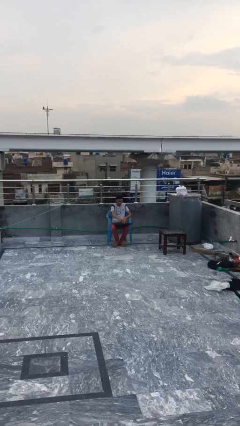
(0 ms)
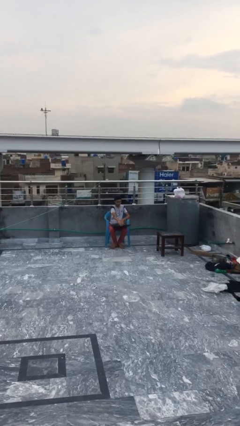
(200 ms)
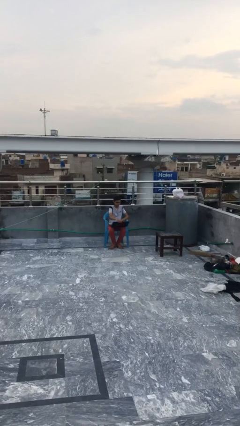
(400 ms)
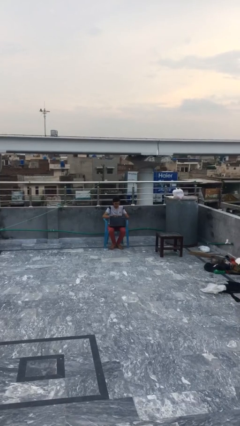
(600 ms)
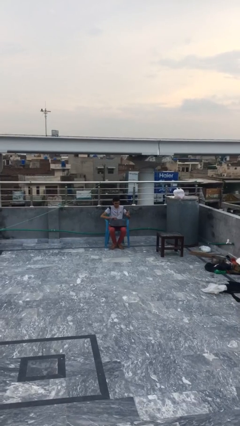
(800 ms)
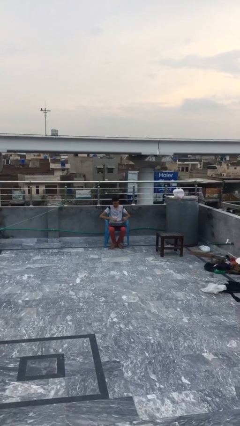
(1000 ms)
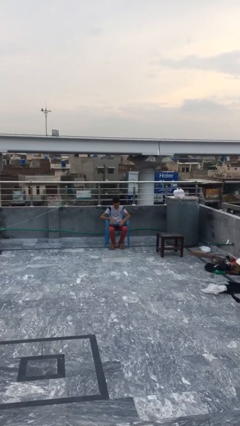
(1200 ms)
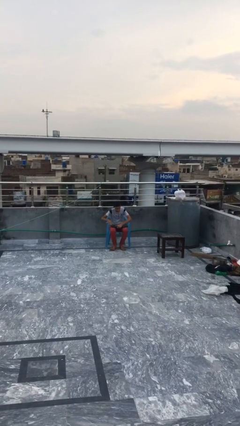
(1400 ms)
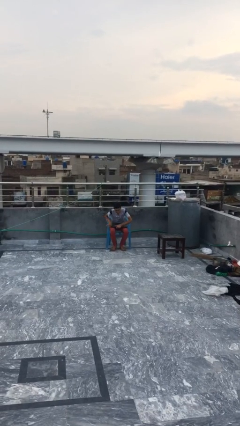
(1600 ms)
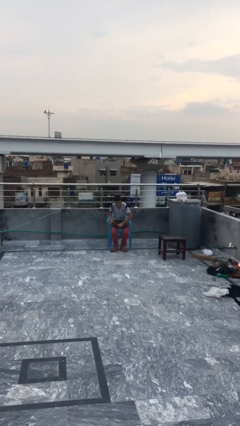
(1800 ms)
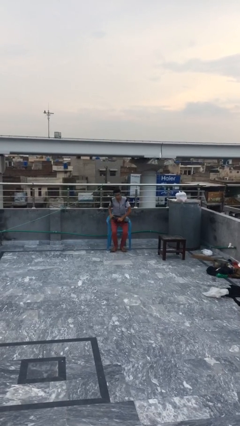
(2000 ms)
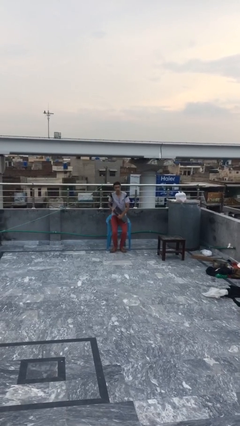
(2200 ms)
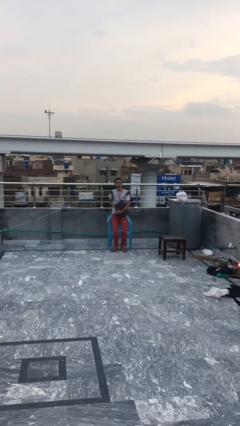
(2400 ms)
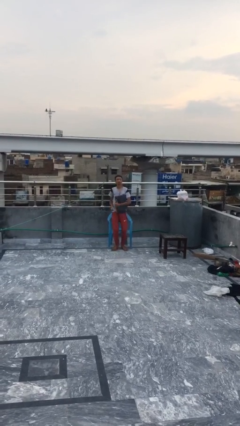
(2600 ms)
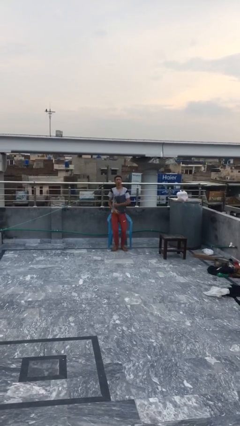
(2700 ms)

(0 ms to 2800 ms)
person stands up

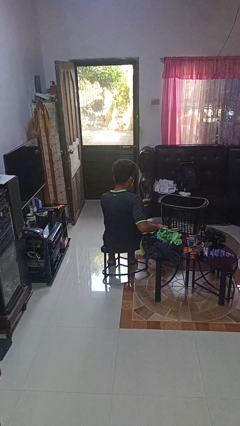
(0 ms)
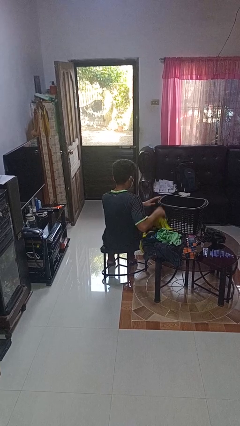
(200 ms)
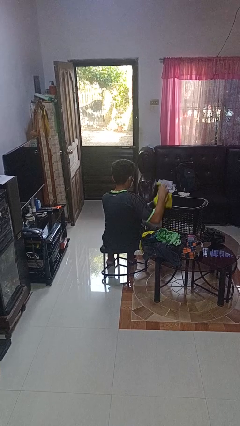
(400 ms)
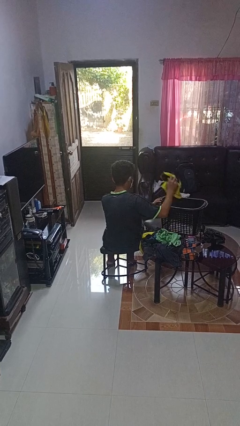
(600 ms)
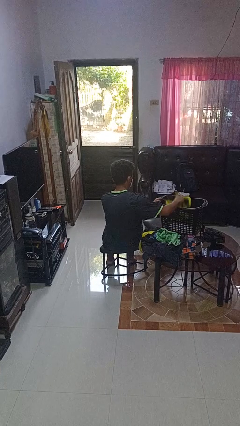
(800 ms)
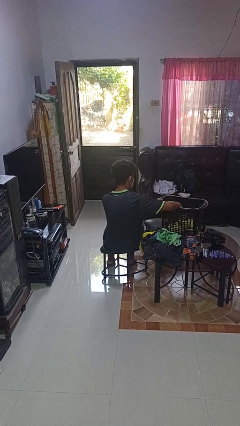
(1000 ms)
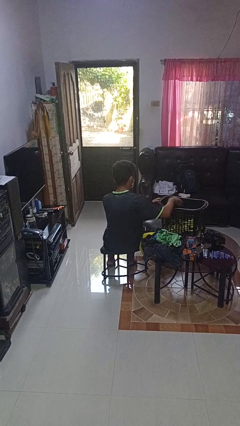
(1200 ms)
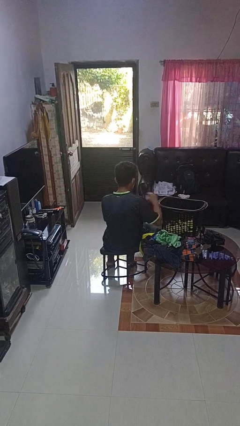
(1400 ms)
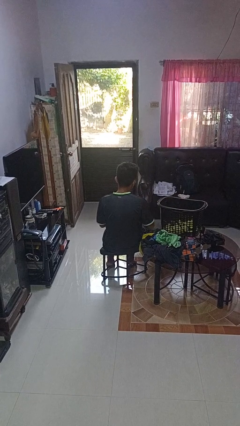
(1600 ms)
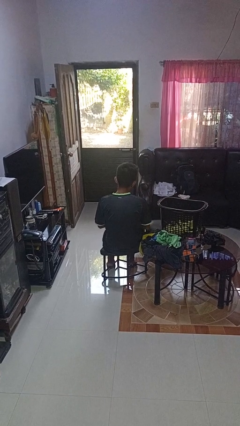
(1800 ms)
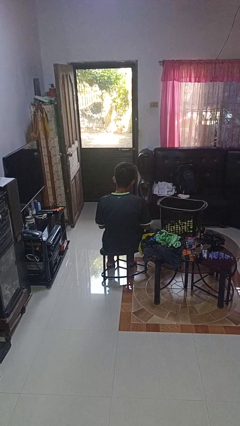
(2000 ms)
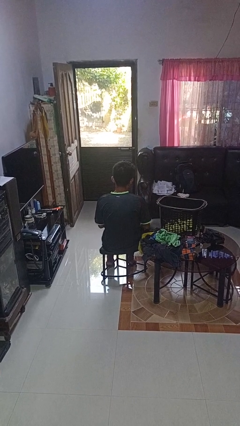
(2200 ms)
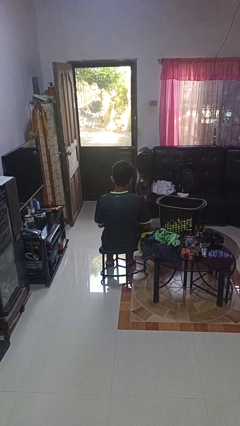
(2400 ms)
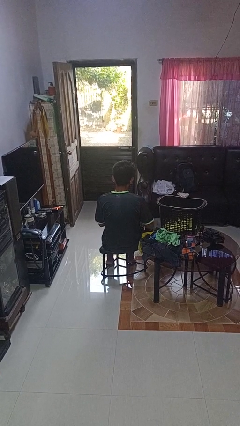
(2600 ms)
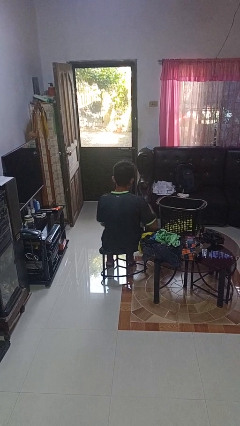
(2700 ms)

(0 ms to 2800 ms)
person puts object into basket

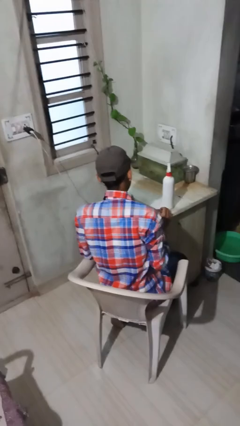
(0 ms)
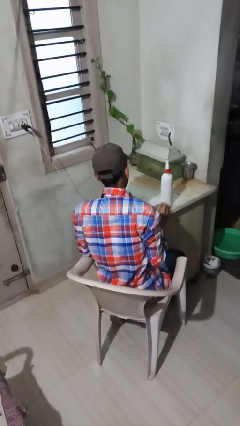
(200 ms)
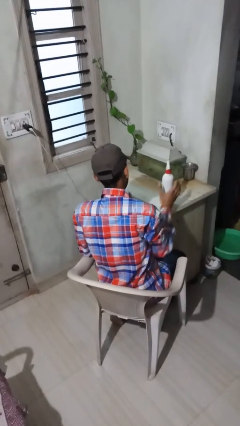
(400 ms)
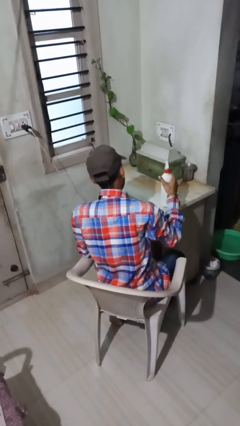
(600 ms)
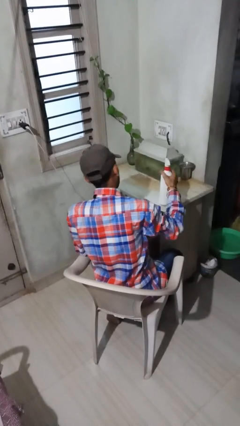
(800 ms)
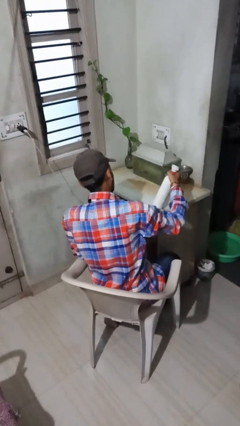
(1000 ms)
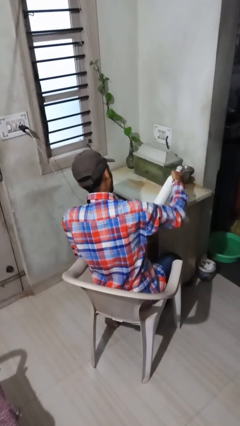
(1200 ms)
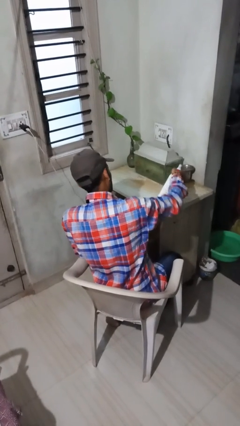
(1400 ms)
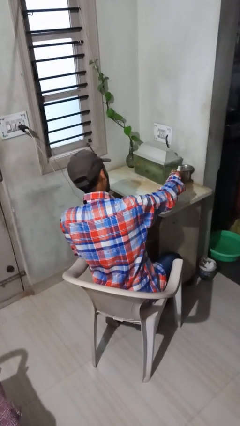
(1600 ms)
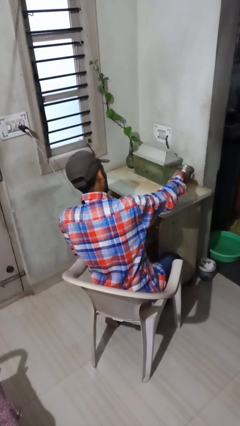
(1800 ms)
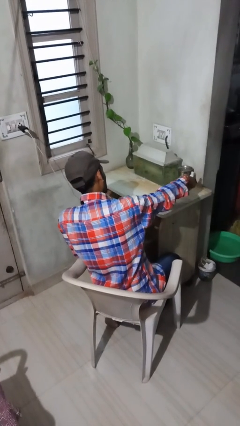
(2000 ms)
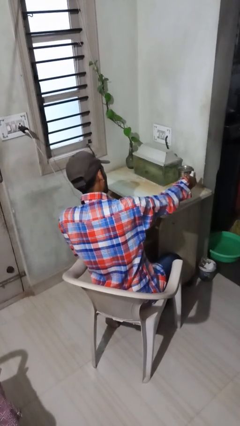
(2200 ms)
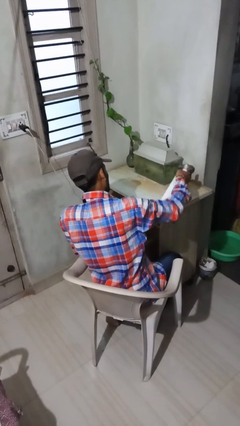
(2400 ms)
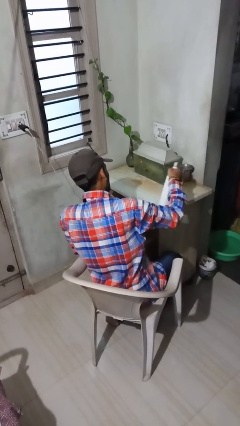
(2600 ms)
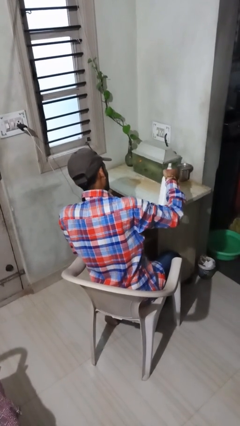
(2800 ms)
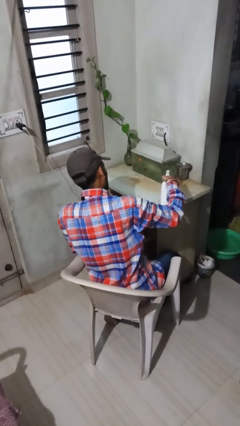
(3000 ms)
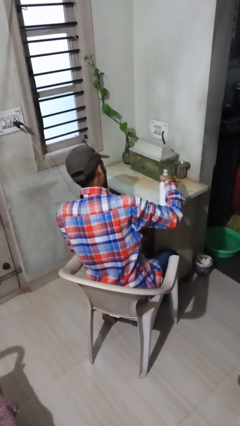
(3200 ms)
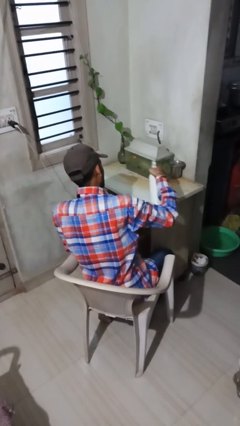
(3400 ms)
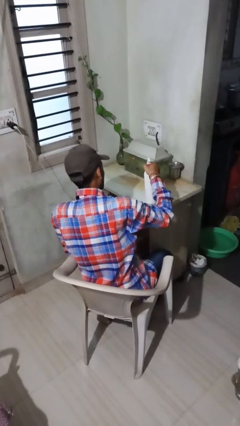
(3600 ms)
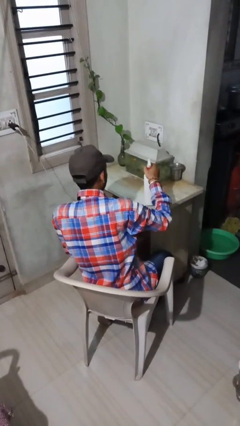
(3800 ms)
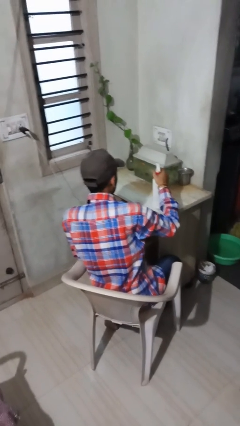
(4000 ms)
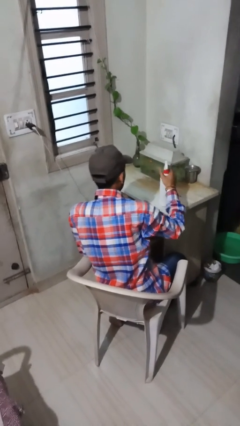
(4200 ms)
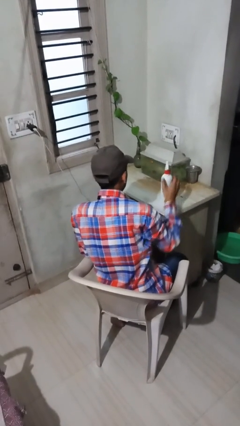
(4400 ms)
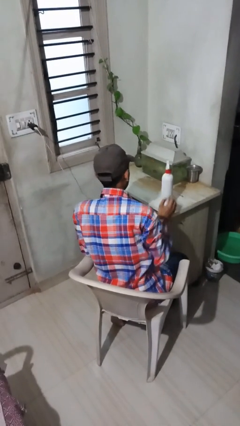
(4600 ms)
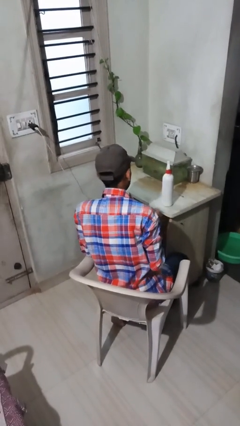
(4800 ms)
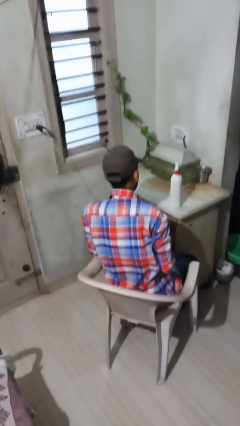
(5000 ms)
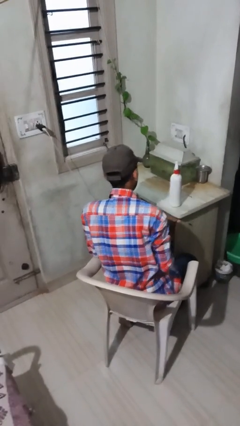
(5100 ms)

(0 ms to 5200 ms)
person sprays from bottle

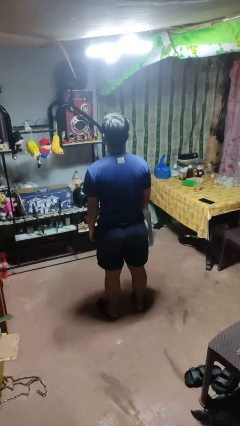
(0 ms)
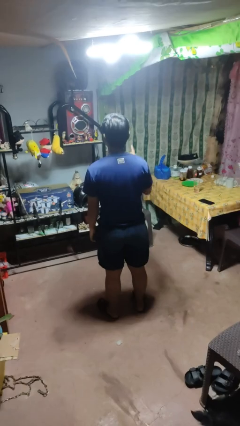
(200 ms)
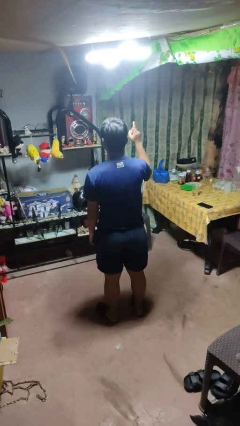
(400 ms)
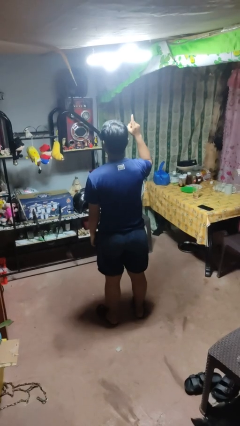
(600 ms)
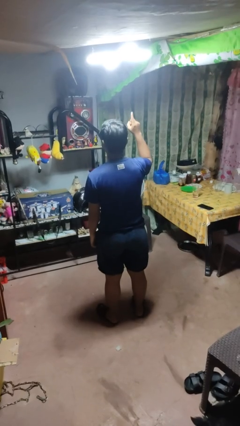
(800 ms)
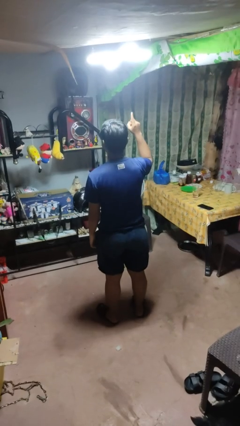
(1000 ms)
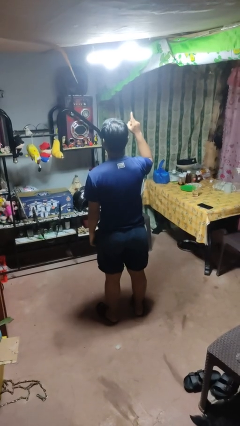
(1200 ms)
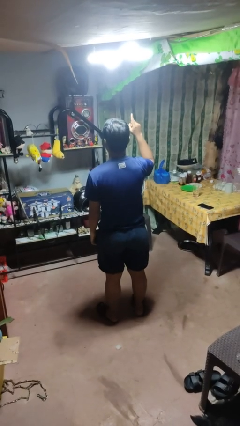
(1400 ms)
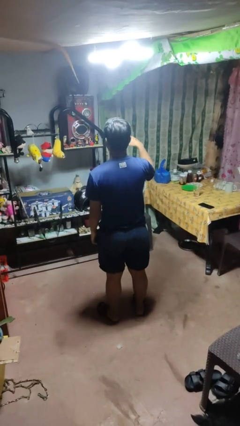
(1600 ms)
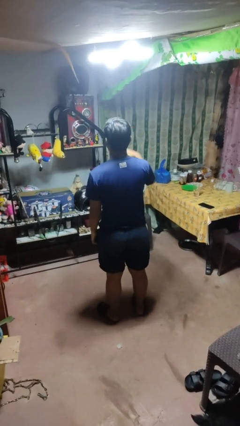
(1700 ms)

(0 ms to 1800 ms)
person gestures number one

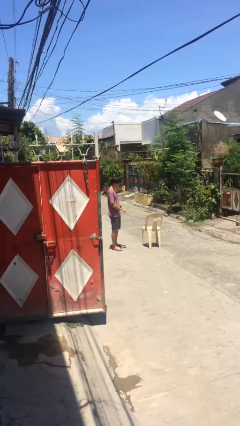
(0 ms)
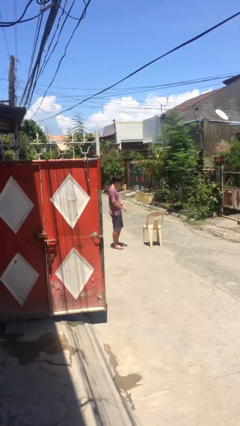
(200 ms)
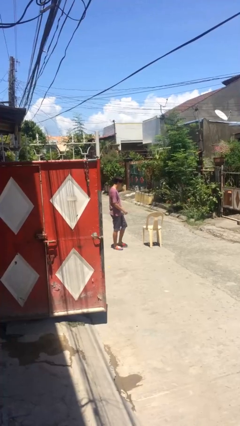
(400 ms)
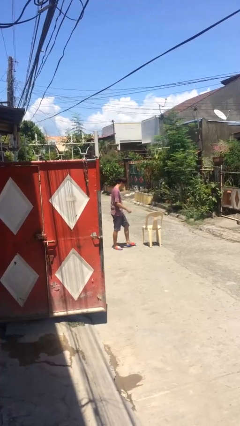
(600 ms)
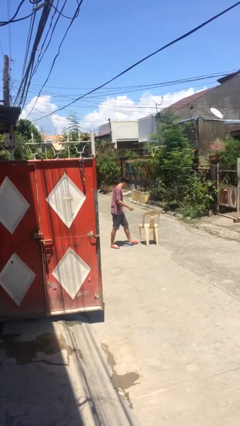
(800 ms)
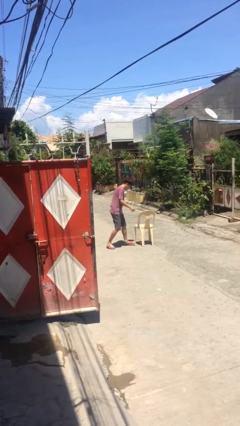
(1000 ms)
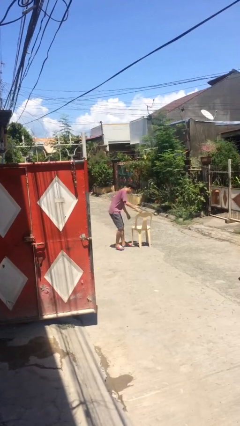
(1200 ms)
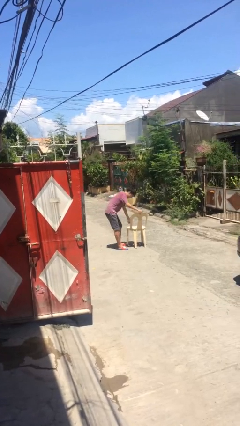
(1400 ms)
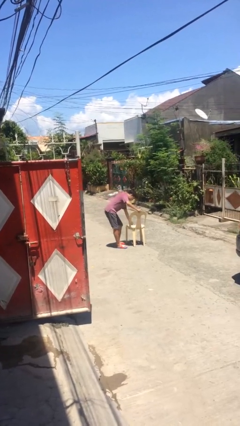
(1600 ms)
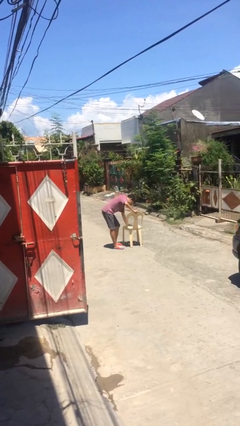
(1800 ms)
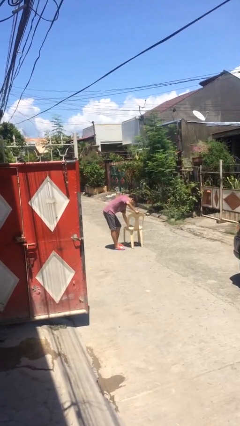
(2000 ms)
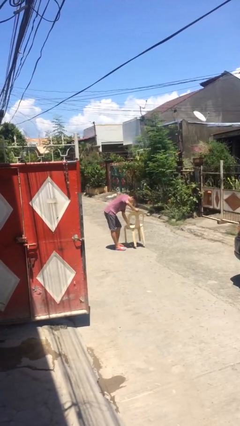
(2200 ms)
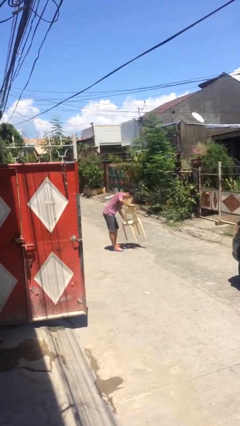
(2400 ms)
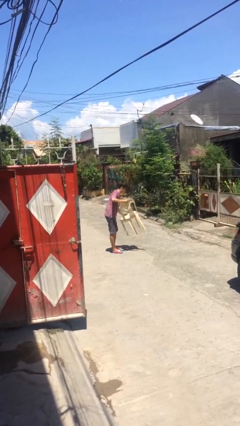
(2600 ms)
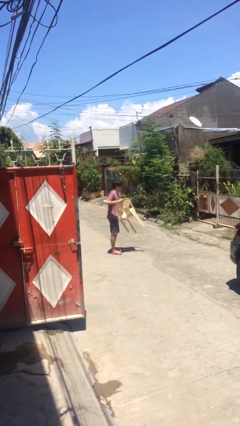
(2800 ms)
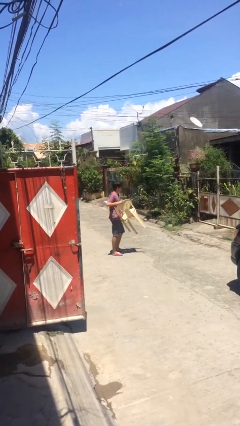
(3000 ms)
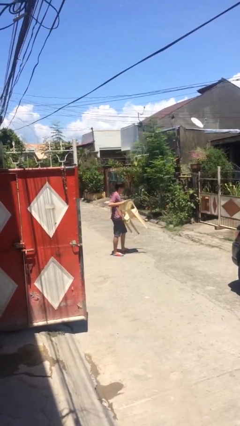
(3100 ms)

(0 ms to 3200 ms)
person picks up object from floor

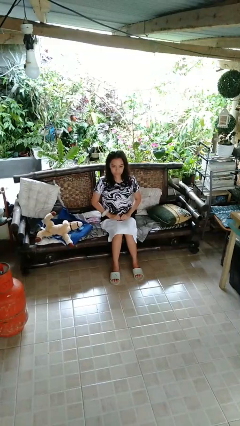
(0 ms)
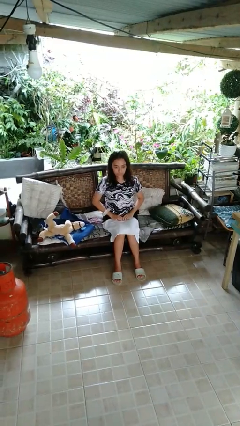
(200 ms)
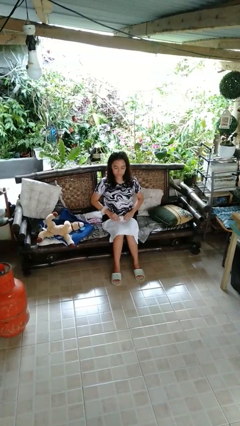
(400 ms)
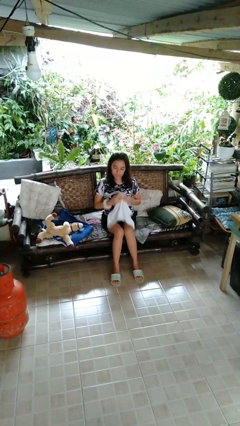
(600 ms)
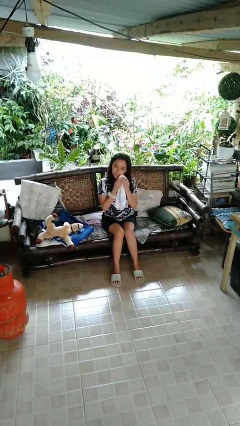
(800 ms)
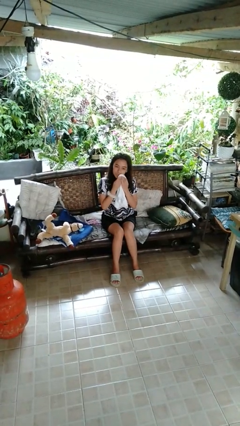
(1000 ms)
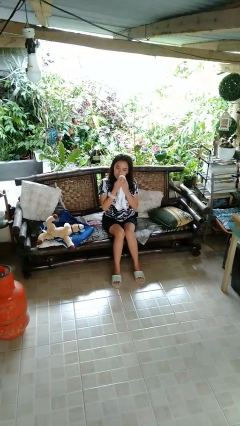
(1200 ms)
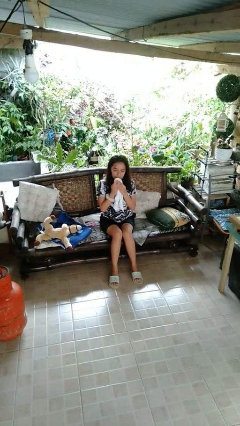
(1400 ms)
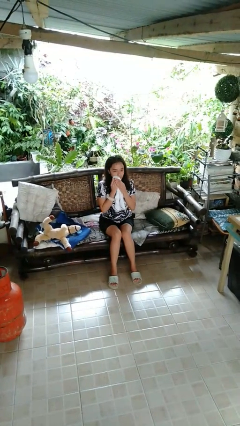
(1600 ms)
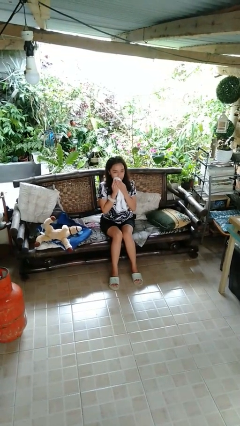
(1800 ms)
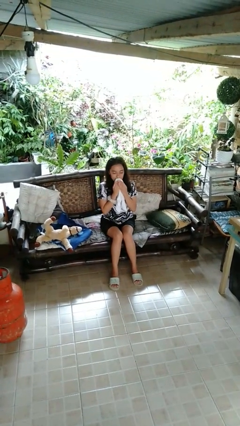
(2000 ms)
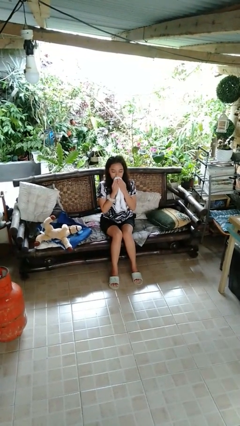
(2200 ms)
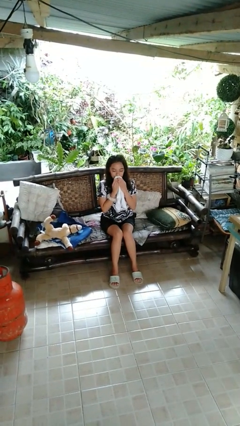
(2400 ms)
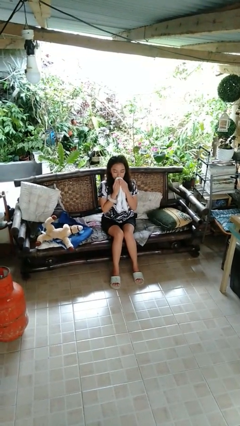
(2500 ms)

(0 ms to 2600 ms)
person wipes mouth with napkin
